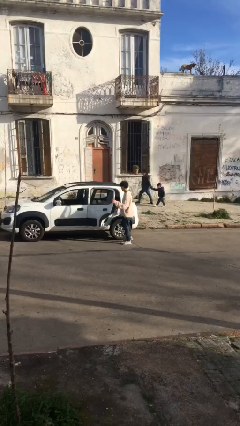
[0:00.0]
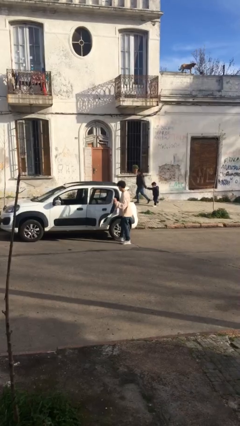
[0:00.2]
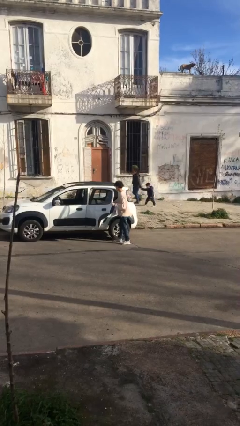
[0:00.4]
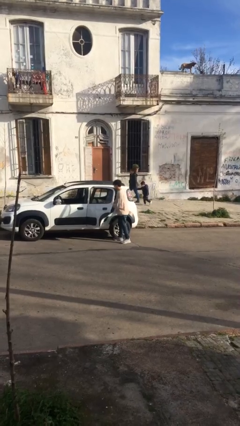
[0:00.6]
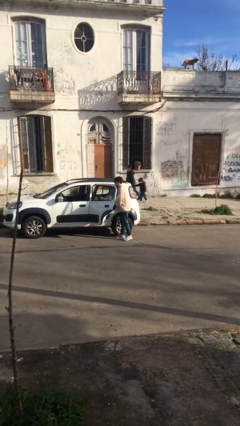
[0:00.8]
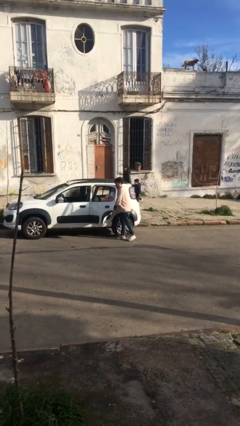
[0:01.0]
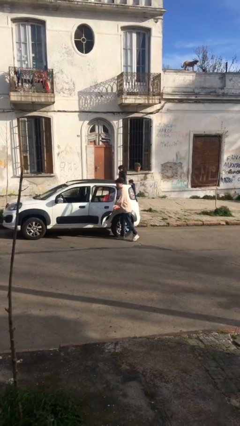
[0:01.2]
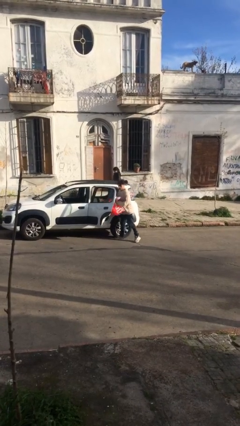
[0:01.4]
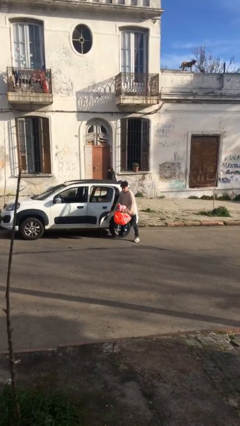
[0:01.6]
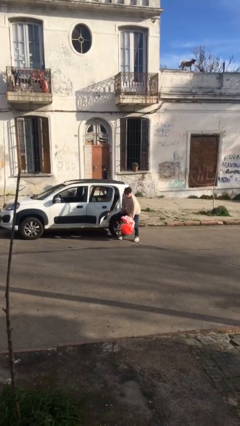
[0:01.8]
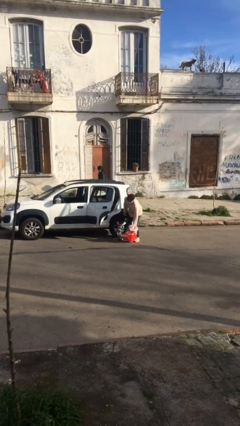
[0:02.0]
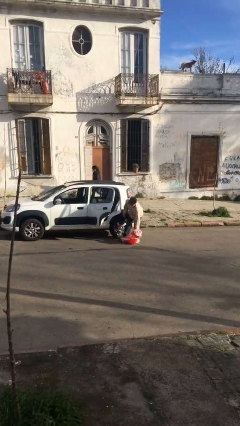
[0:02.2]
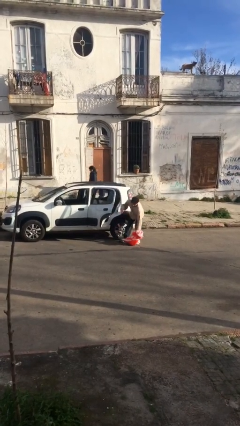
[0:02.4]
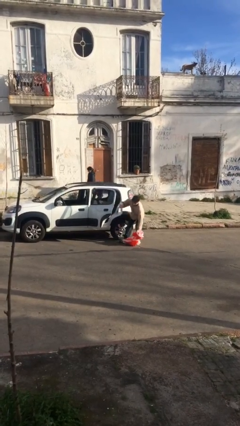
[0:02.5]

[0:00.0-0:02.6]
person unloads car

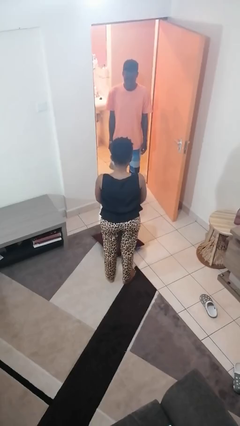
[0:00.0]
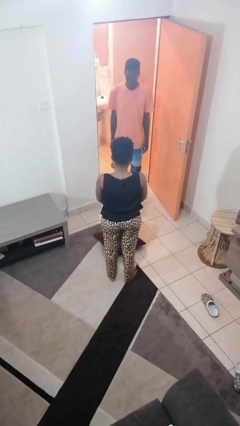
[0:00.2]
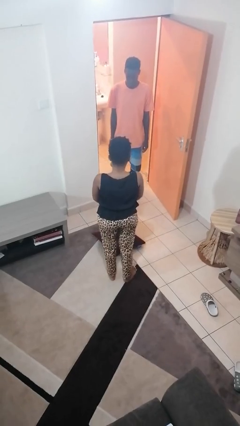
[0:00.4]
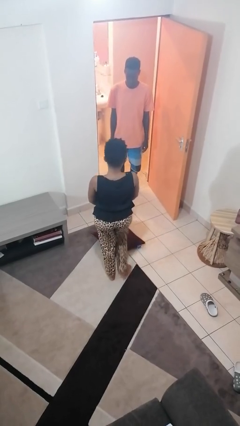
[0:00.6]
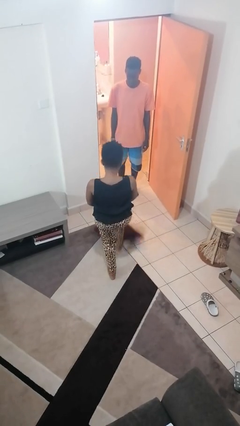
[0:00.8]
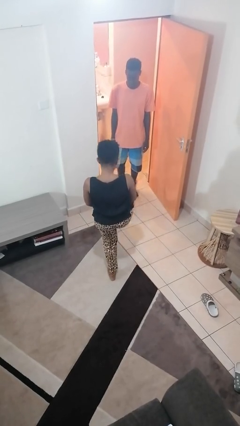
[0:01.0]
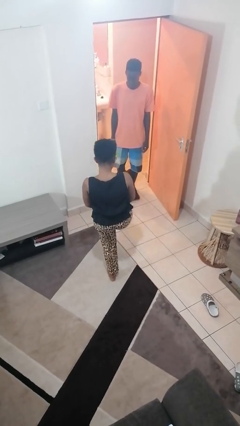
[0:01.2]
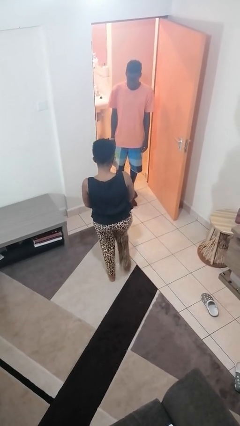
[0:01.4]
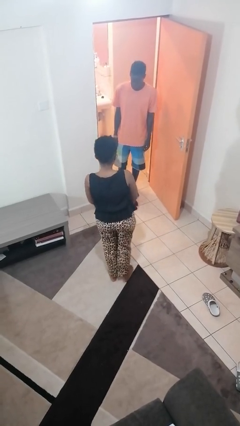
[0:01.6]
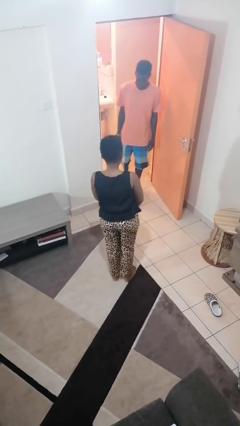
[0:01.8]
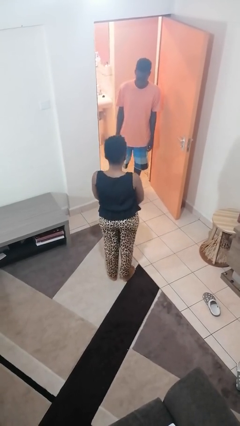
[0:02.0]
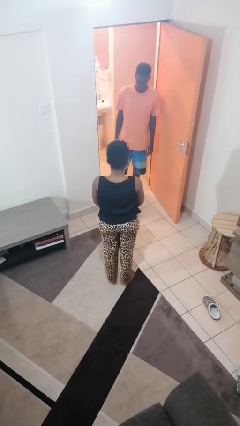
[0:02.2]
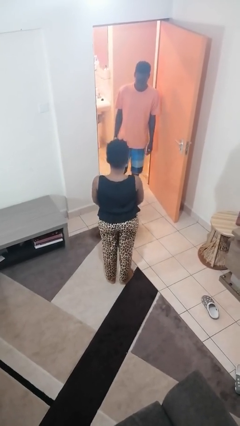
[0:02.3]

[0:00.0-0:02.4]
person kicks object to person

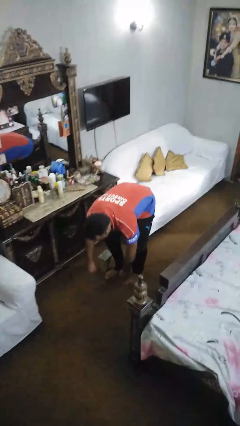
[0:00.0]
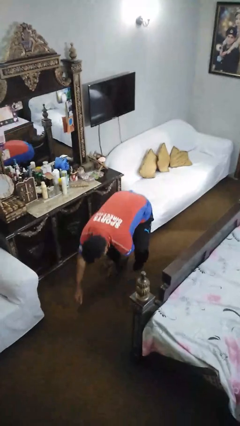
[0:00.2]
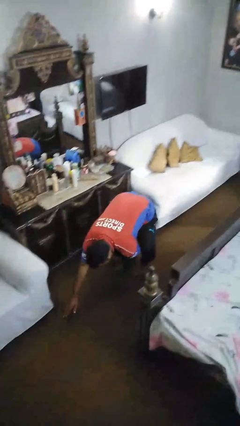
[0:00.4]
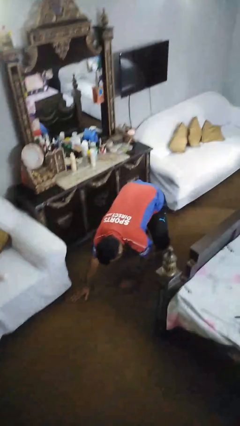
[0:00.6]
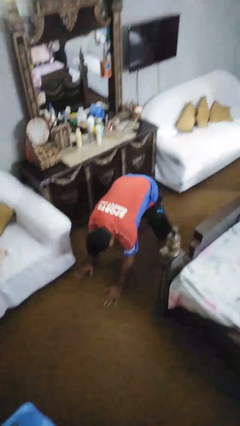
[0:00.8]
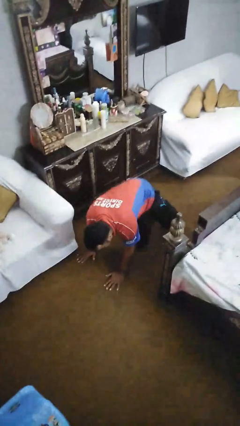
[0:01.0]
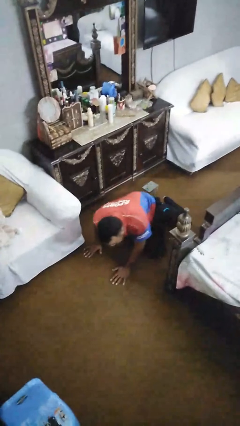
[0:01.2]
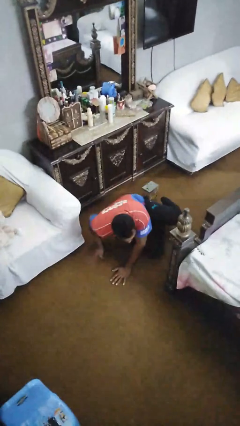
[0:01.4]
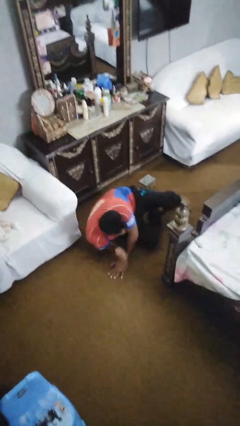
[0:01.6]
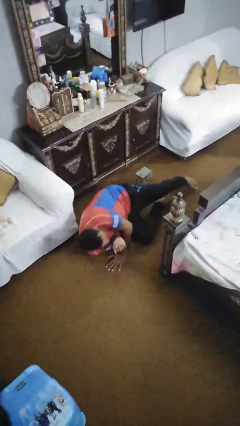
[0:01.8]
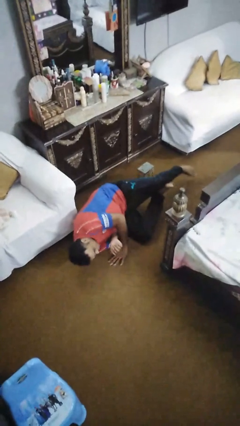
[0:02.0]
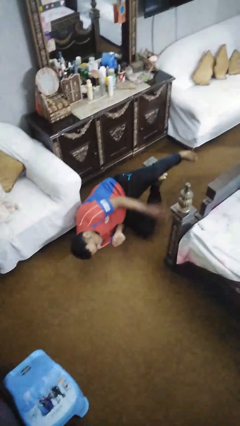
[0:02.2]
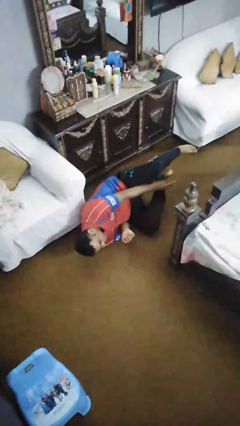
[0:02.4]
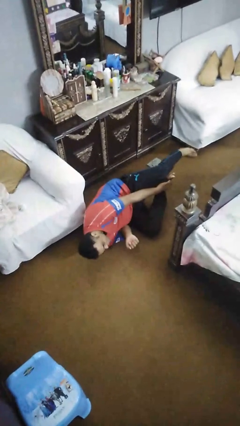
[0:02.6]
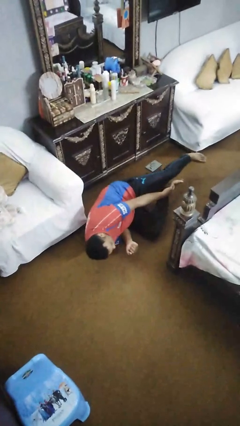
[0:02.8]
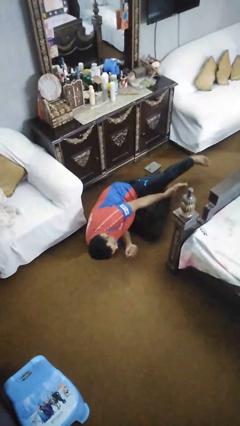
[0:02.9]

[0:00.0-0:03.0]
person lies down on floor

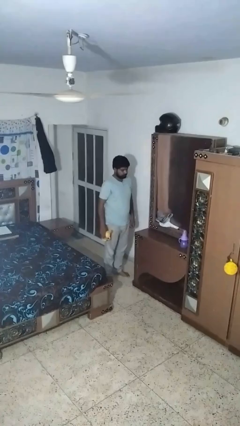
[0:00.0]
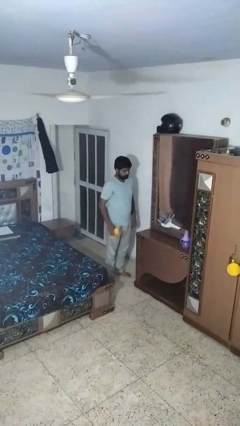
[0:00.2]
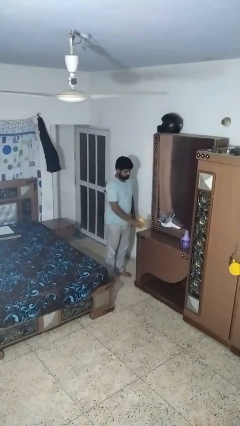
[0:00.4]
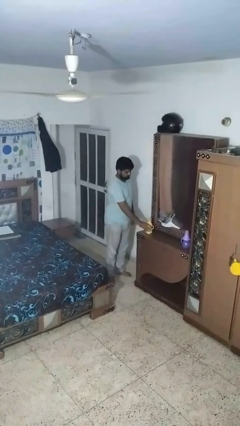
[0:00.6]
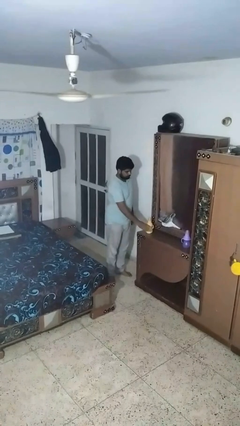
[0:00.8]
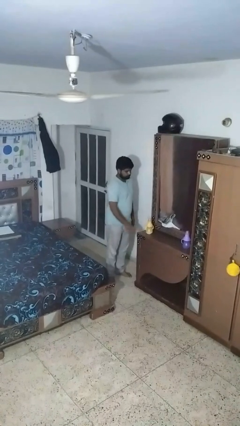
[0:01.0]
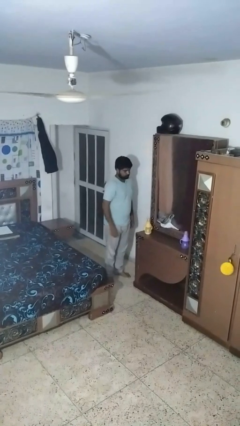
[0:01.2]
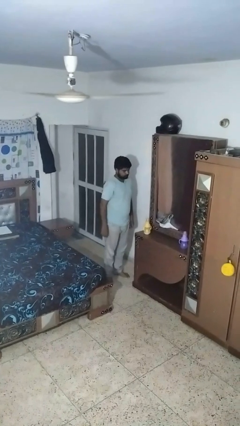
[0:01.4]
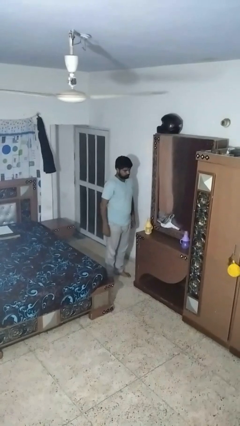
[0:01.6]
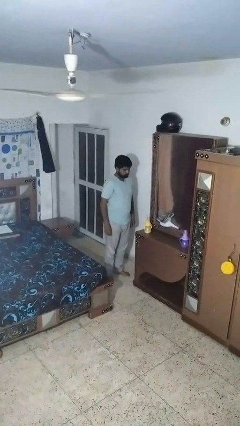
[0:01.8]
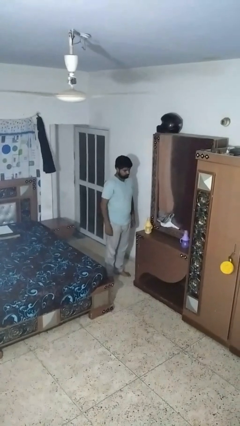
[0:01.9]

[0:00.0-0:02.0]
person puts down object on countertop

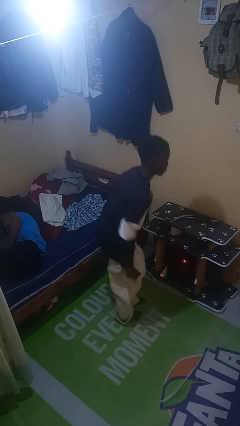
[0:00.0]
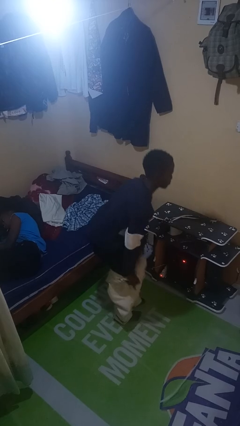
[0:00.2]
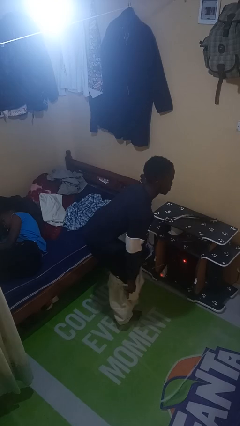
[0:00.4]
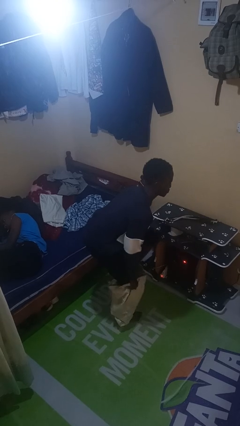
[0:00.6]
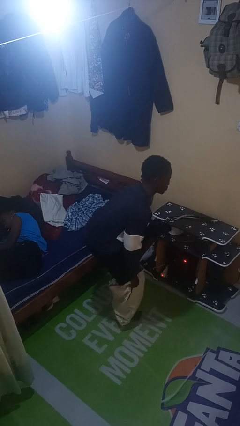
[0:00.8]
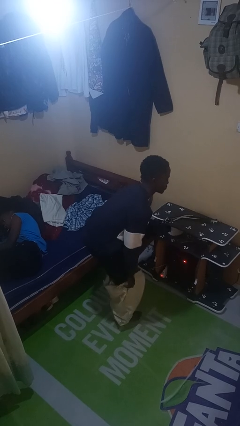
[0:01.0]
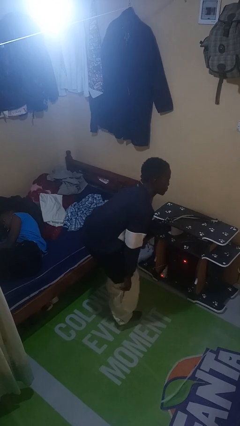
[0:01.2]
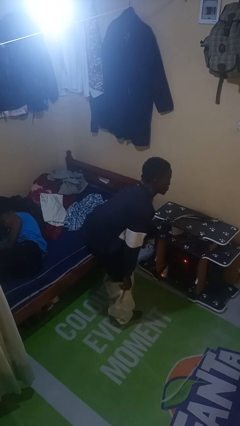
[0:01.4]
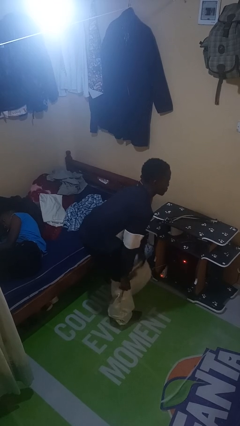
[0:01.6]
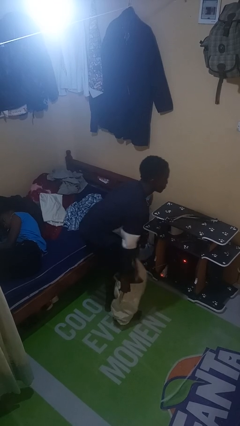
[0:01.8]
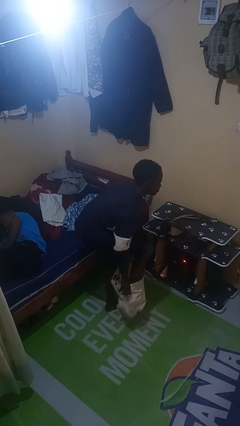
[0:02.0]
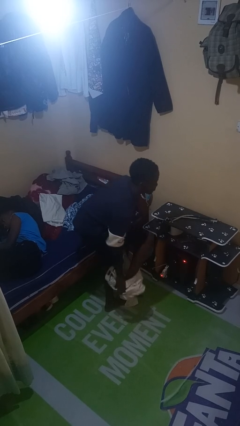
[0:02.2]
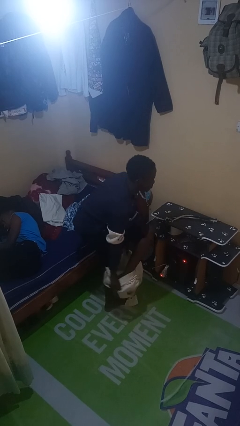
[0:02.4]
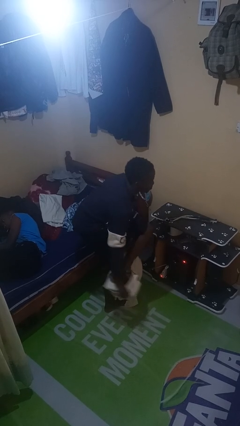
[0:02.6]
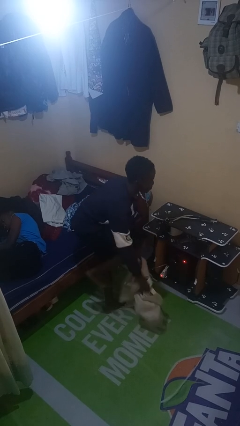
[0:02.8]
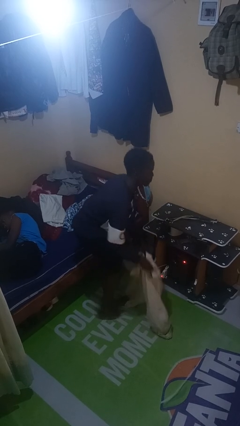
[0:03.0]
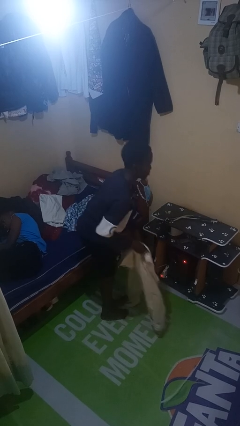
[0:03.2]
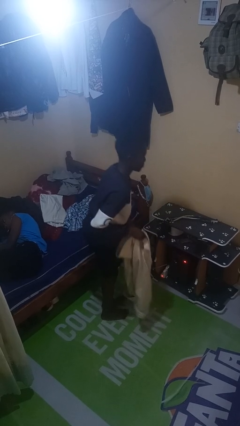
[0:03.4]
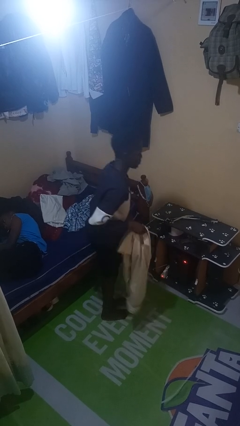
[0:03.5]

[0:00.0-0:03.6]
person takes off pants

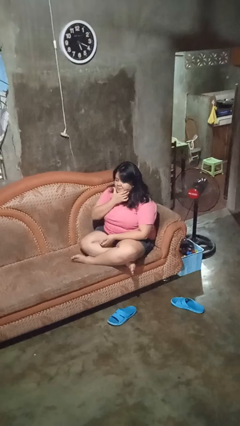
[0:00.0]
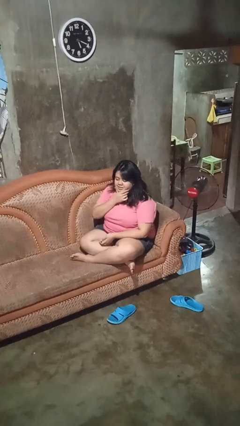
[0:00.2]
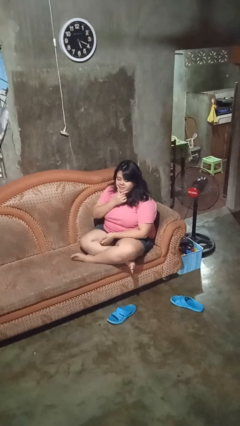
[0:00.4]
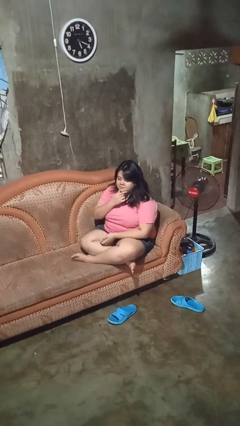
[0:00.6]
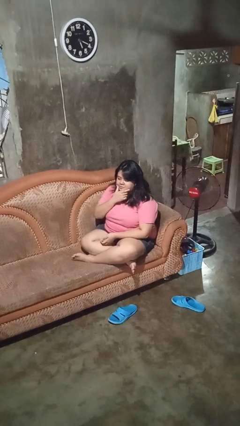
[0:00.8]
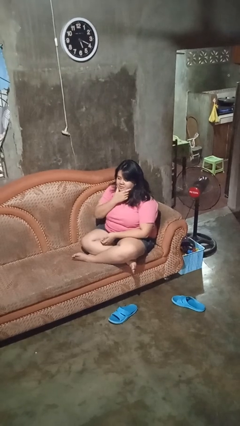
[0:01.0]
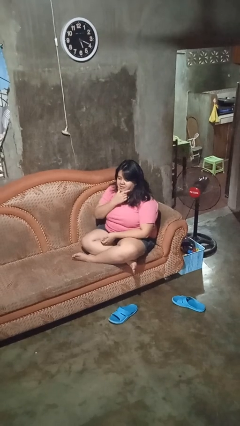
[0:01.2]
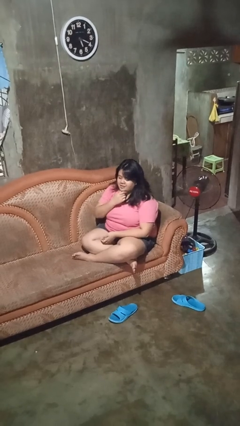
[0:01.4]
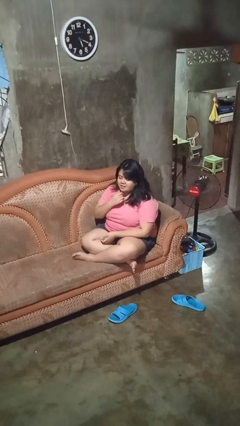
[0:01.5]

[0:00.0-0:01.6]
person strokes chin

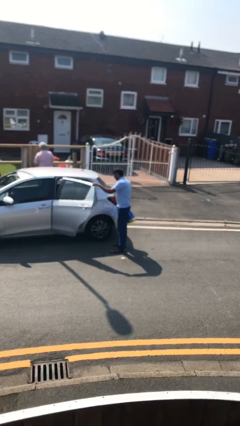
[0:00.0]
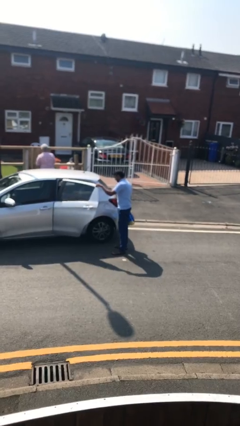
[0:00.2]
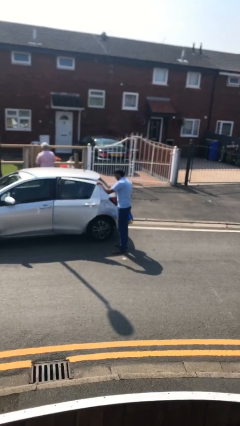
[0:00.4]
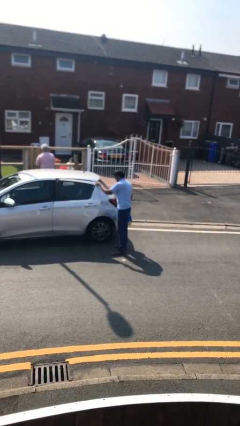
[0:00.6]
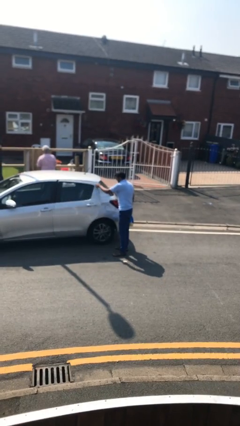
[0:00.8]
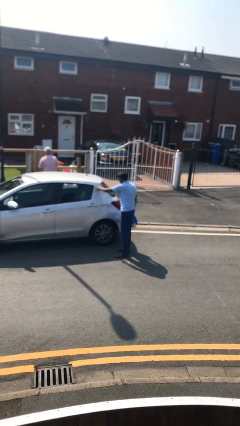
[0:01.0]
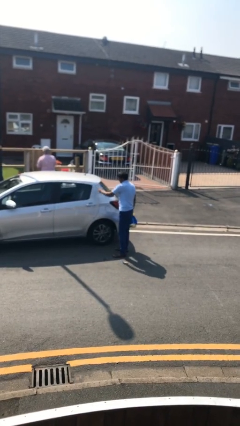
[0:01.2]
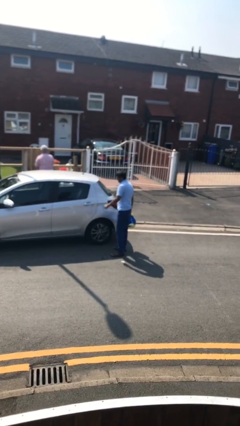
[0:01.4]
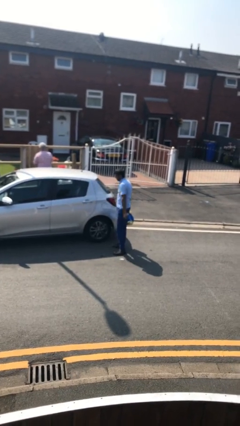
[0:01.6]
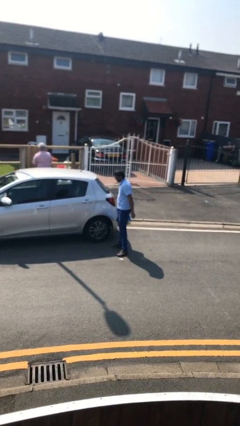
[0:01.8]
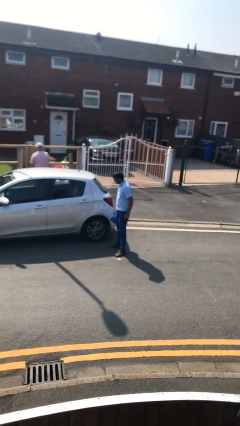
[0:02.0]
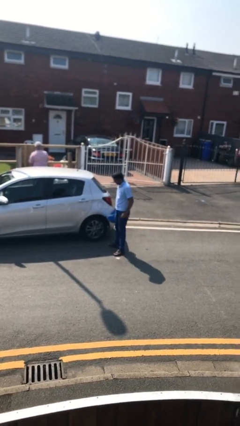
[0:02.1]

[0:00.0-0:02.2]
person closes car door
